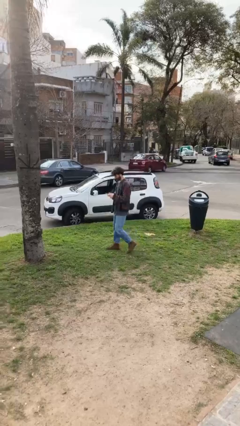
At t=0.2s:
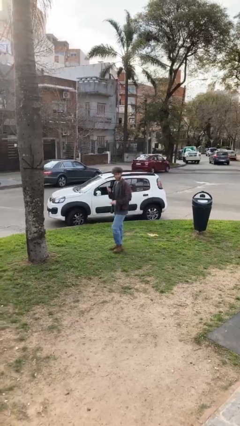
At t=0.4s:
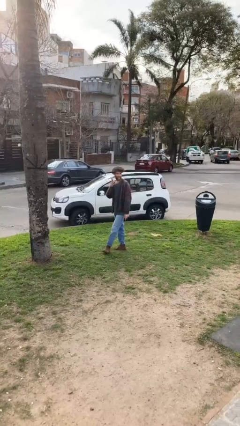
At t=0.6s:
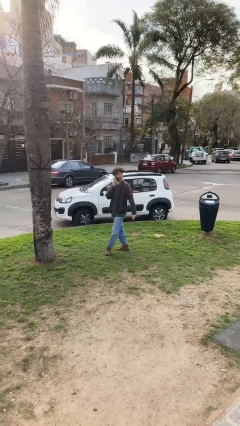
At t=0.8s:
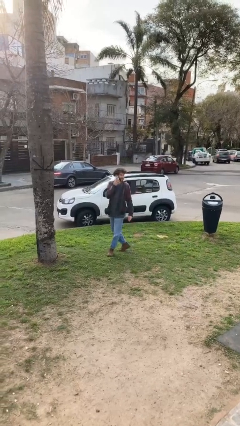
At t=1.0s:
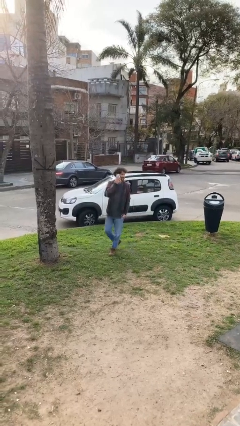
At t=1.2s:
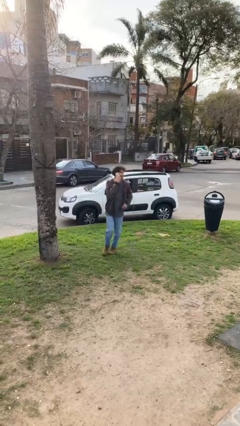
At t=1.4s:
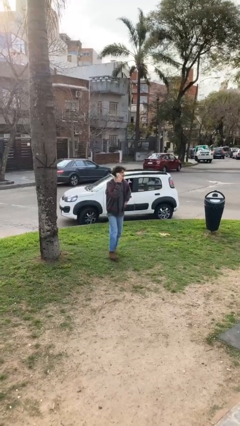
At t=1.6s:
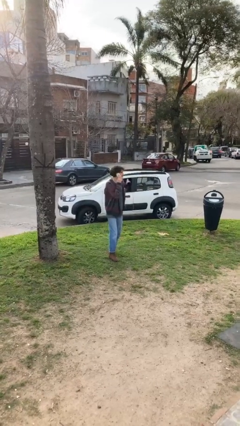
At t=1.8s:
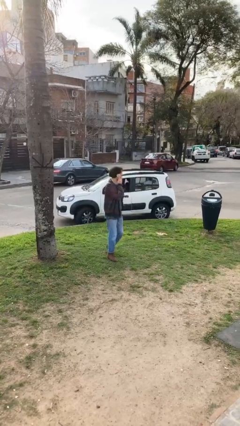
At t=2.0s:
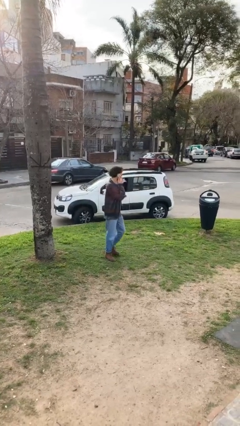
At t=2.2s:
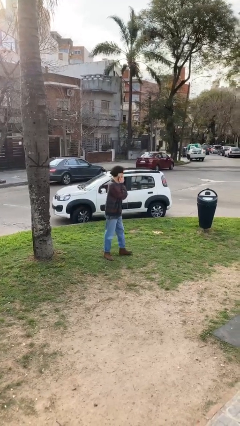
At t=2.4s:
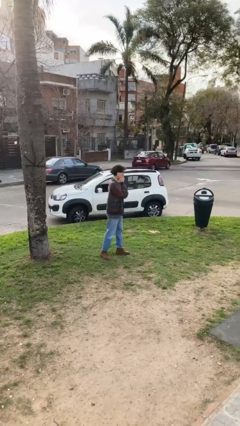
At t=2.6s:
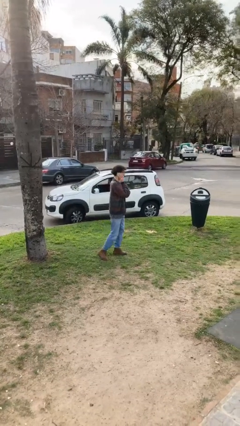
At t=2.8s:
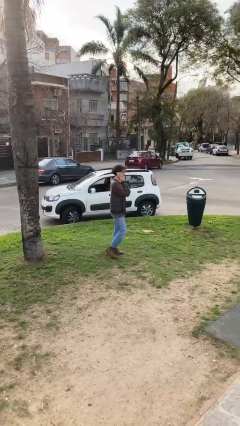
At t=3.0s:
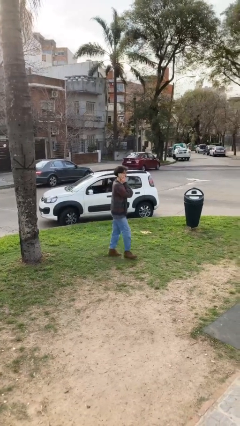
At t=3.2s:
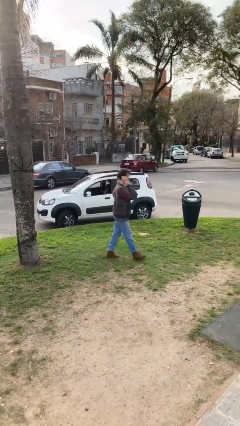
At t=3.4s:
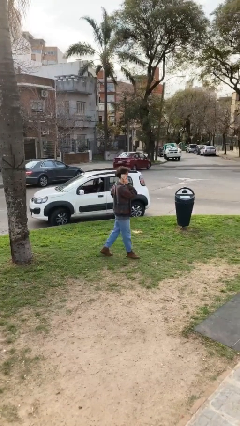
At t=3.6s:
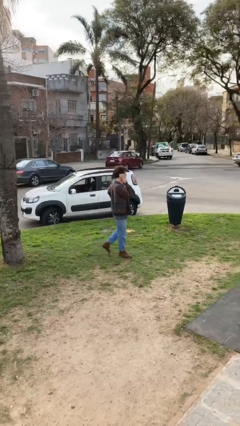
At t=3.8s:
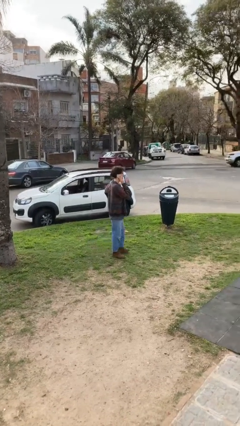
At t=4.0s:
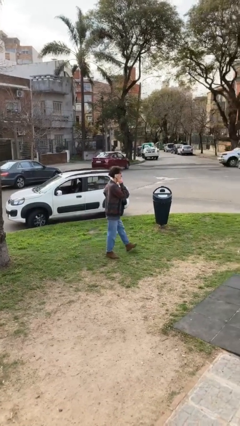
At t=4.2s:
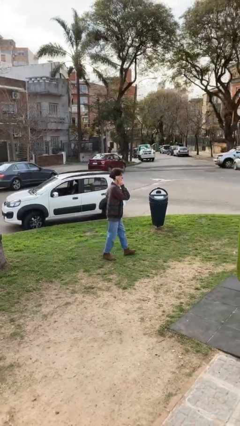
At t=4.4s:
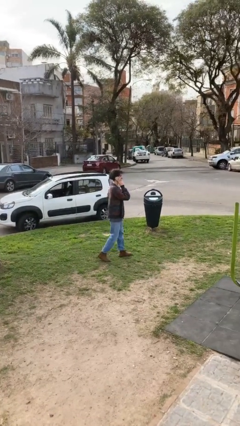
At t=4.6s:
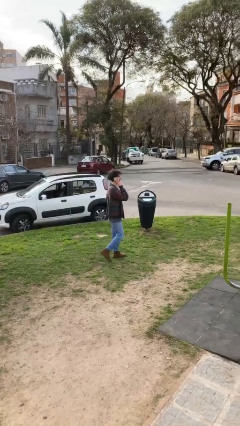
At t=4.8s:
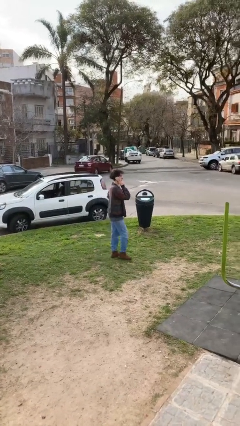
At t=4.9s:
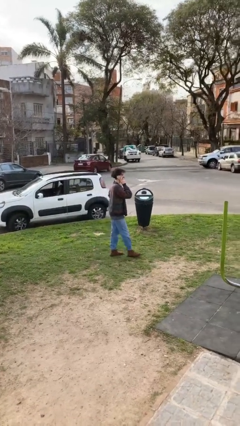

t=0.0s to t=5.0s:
person talks on phone

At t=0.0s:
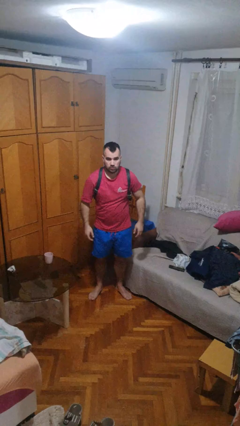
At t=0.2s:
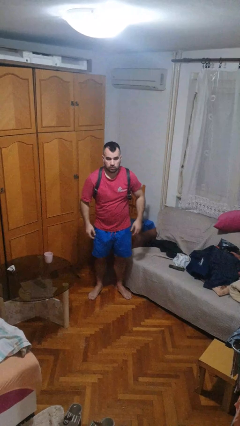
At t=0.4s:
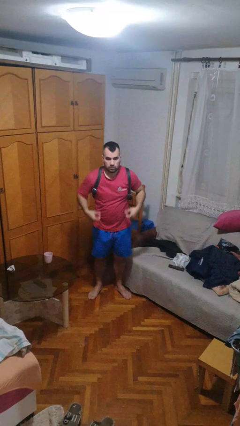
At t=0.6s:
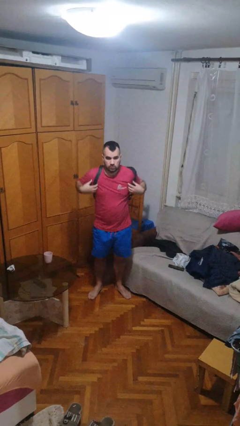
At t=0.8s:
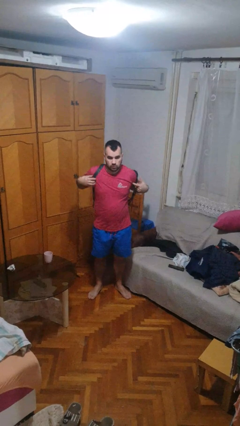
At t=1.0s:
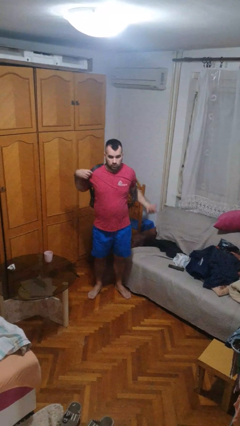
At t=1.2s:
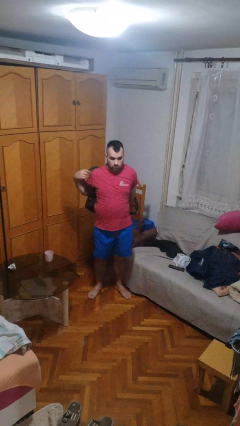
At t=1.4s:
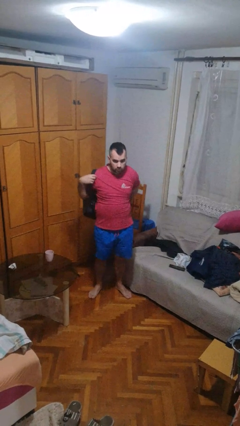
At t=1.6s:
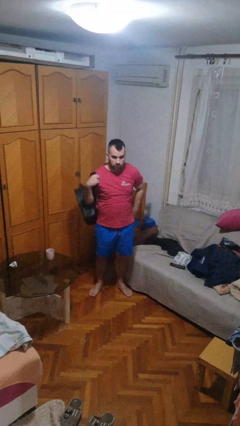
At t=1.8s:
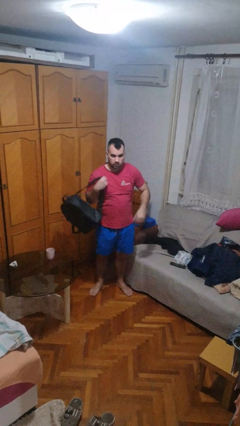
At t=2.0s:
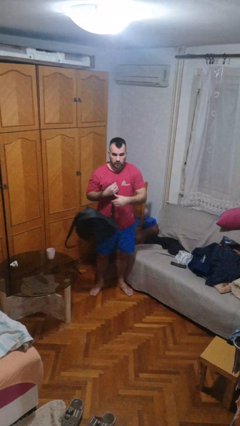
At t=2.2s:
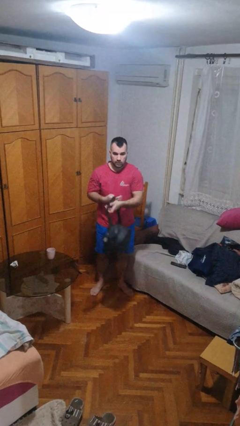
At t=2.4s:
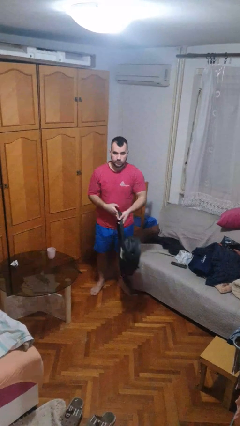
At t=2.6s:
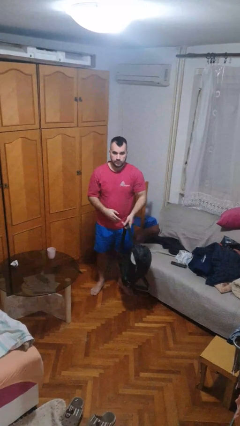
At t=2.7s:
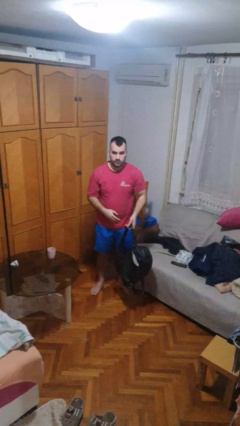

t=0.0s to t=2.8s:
person takes off backpack

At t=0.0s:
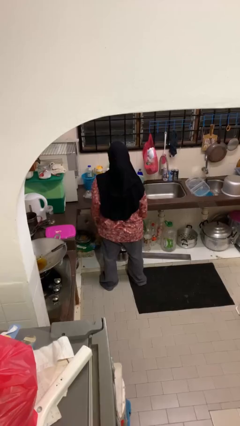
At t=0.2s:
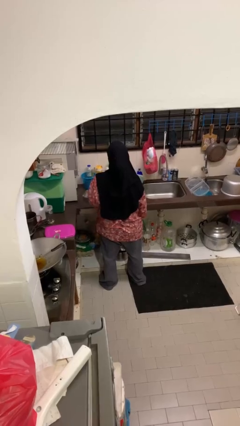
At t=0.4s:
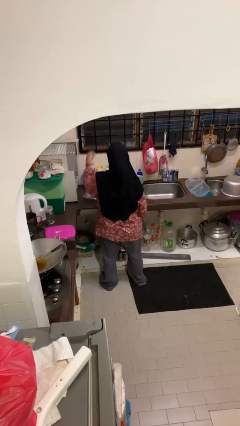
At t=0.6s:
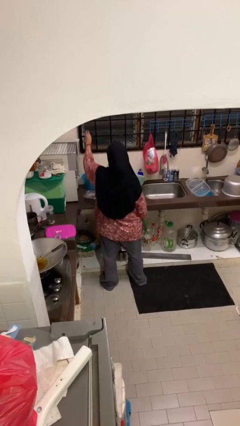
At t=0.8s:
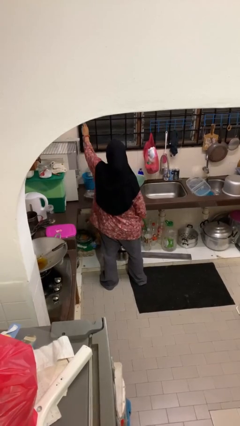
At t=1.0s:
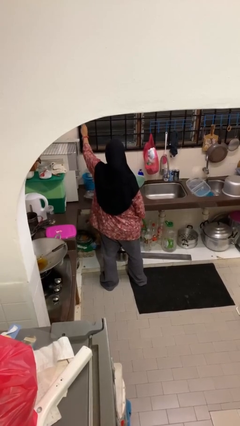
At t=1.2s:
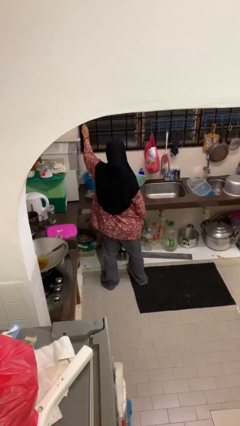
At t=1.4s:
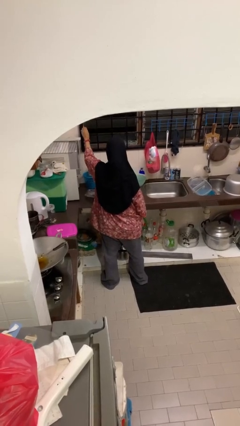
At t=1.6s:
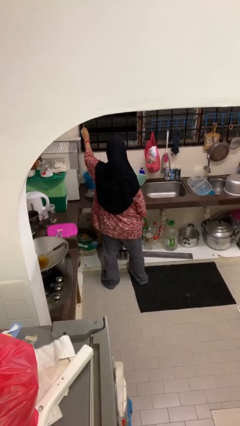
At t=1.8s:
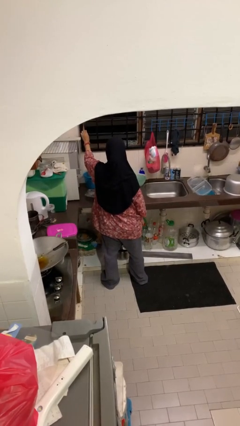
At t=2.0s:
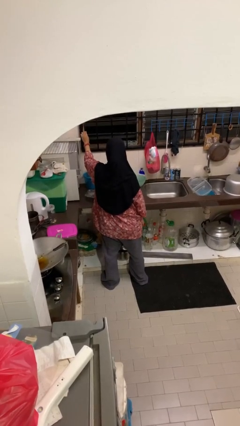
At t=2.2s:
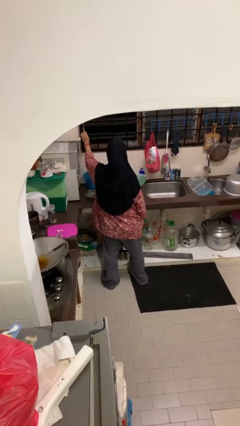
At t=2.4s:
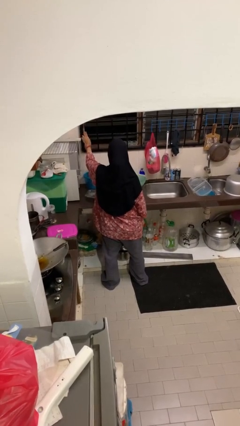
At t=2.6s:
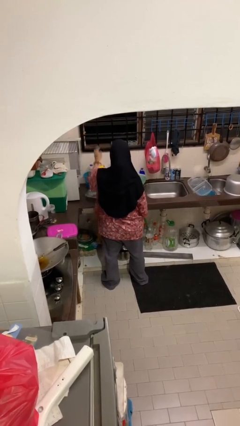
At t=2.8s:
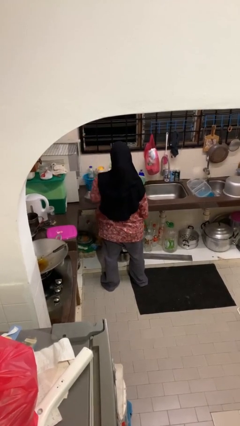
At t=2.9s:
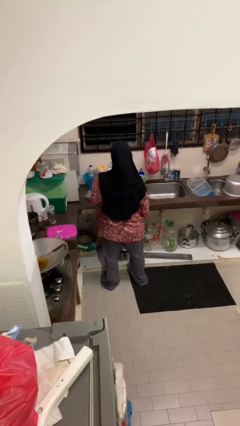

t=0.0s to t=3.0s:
person opens home window

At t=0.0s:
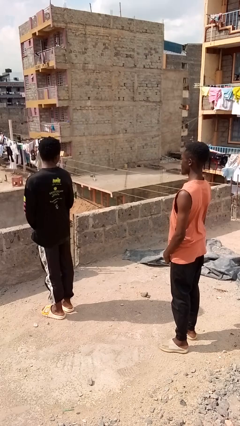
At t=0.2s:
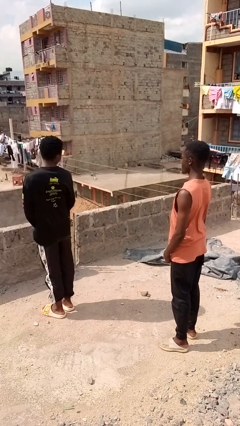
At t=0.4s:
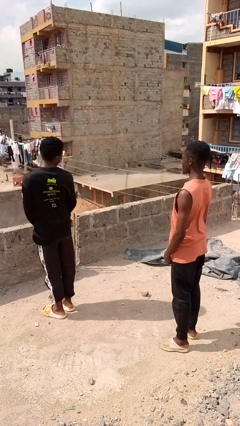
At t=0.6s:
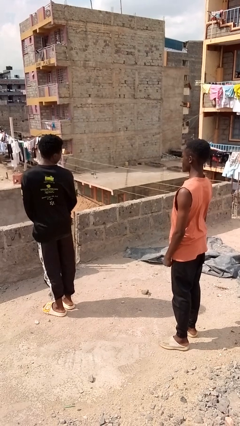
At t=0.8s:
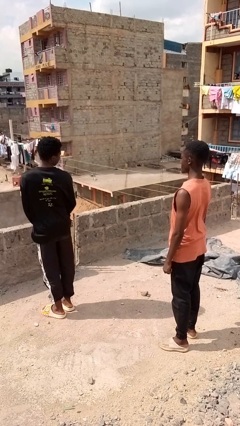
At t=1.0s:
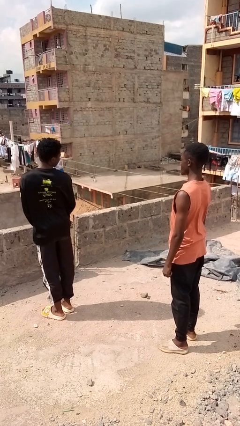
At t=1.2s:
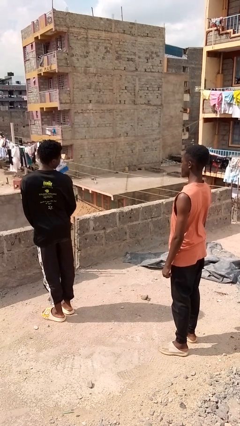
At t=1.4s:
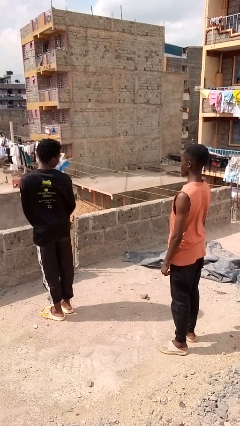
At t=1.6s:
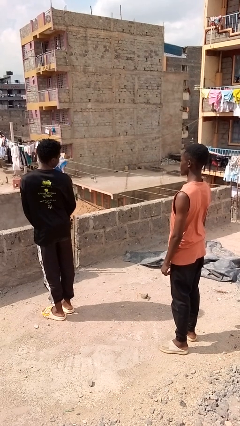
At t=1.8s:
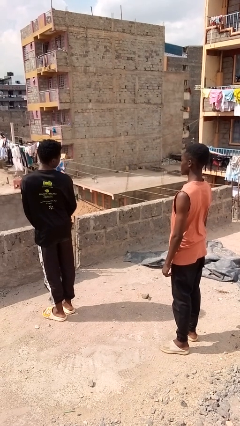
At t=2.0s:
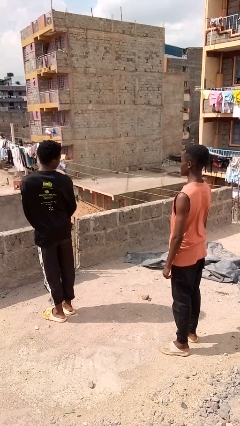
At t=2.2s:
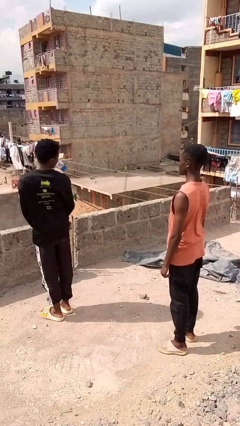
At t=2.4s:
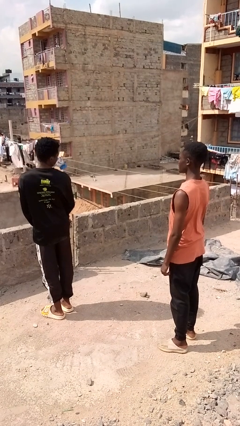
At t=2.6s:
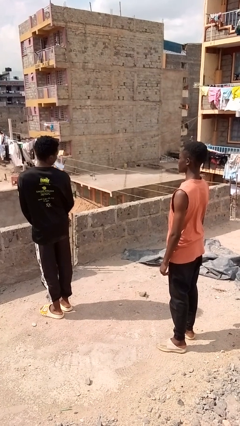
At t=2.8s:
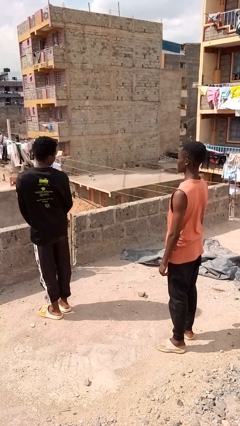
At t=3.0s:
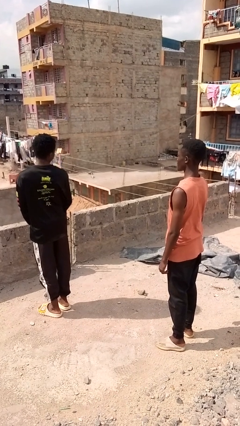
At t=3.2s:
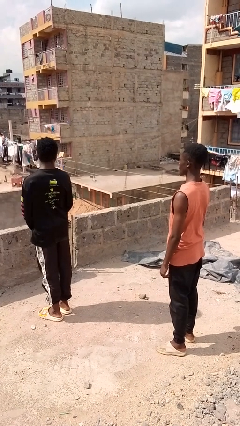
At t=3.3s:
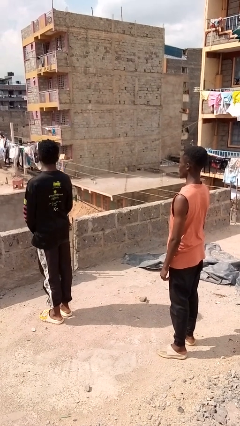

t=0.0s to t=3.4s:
person looks over shoulder

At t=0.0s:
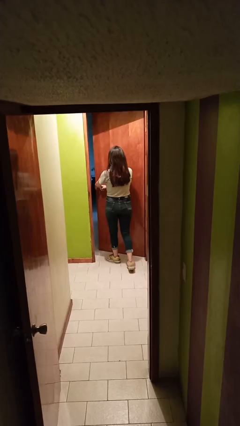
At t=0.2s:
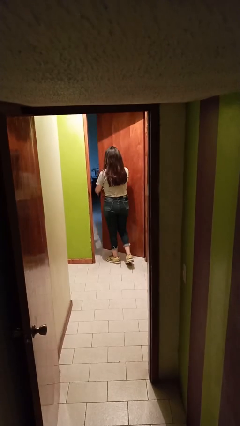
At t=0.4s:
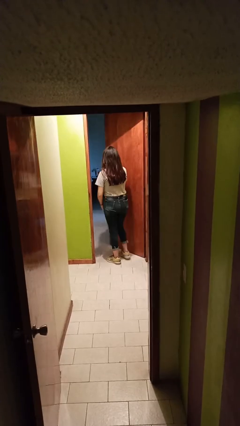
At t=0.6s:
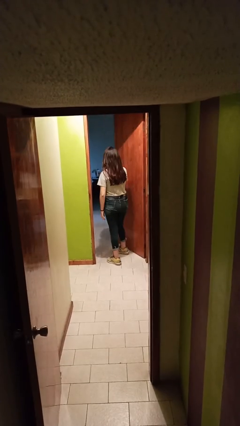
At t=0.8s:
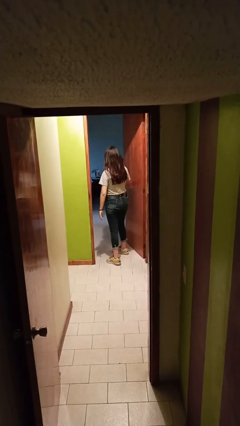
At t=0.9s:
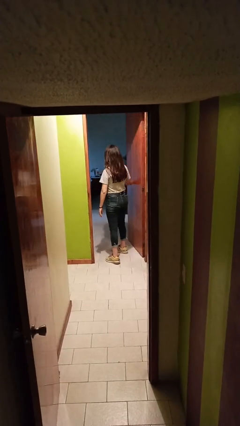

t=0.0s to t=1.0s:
person opens facility door

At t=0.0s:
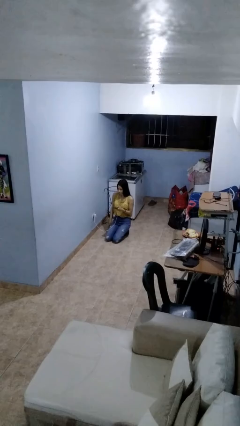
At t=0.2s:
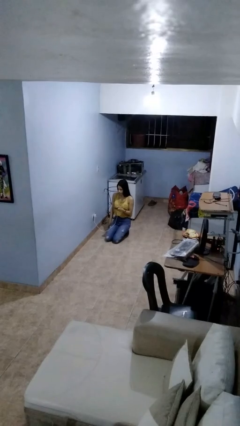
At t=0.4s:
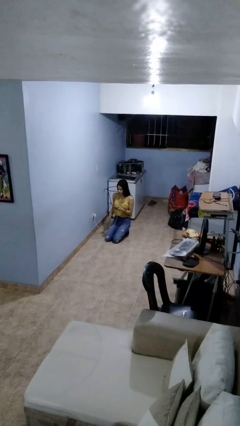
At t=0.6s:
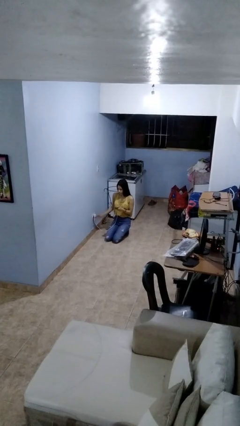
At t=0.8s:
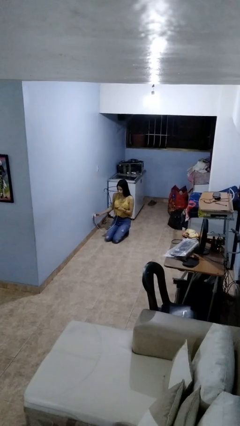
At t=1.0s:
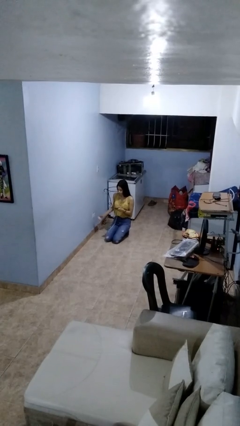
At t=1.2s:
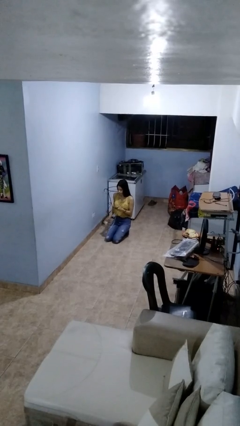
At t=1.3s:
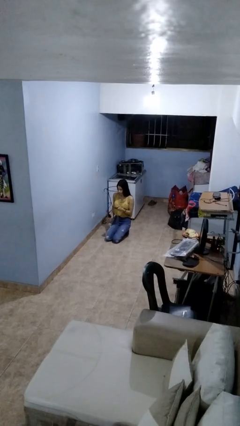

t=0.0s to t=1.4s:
person unplugs from electrical socket

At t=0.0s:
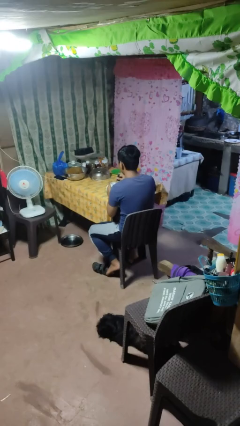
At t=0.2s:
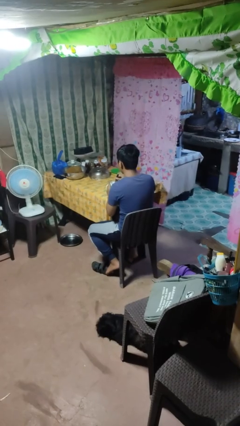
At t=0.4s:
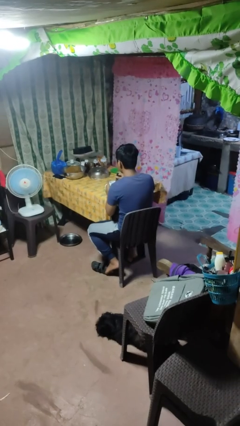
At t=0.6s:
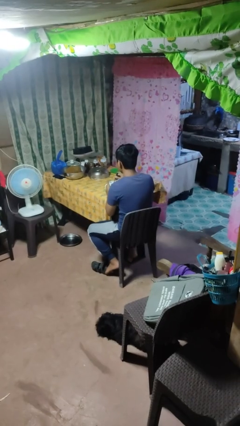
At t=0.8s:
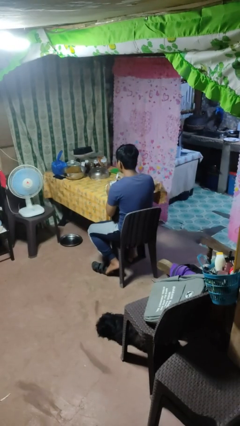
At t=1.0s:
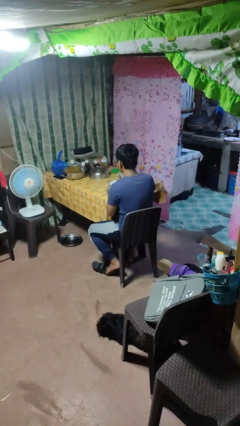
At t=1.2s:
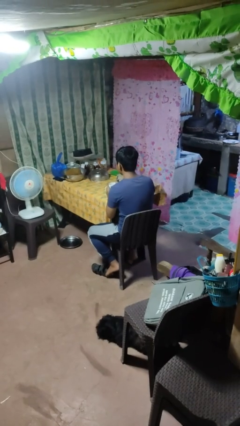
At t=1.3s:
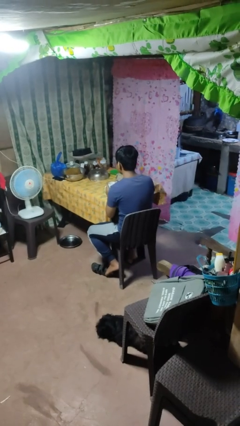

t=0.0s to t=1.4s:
person stirs mug
